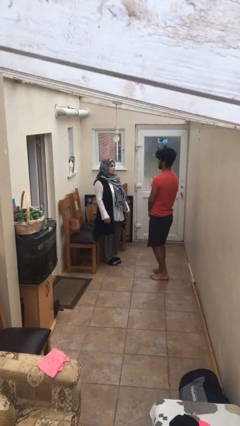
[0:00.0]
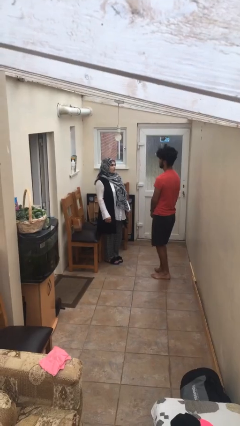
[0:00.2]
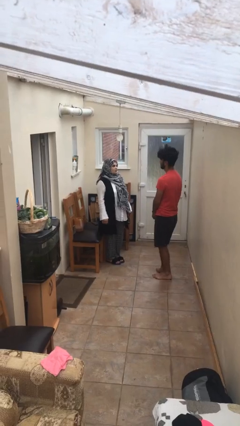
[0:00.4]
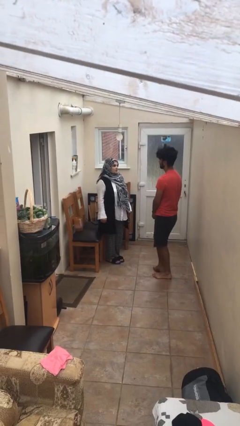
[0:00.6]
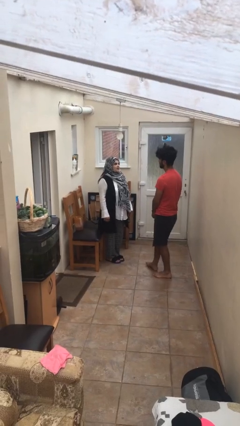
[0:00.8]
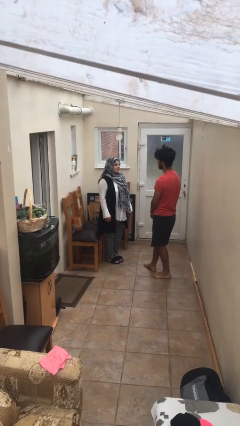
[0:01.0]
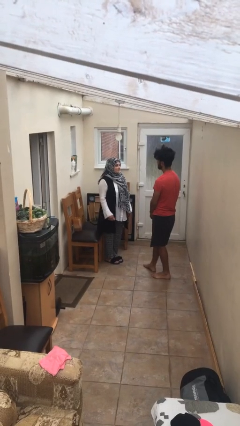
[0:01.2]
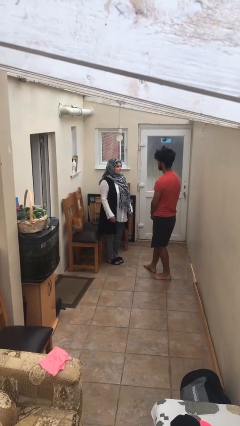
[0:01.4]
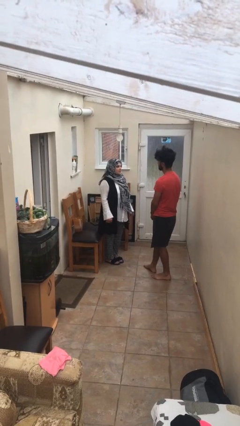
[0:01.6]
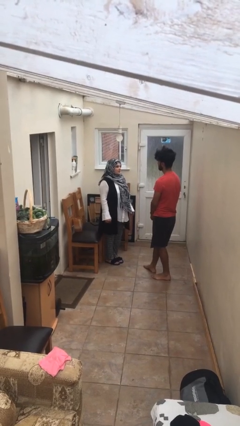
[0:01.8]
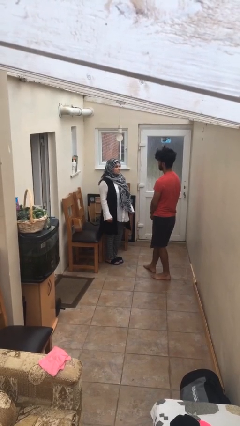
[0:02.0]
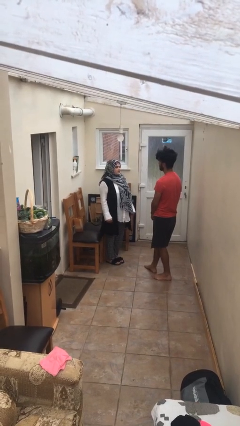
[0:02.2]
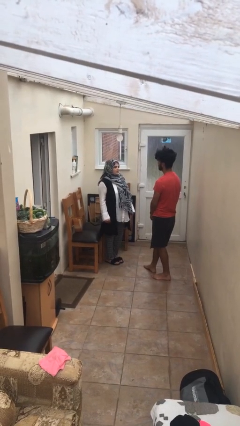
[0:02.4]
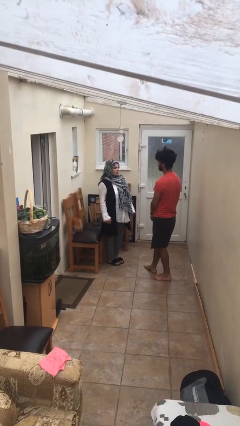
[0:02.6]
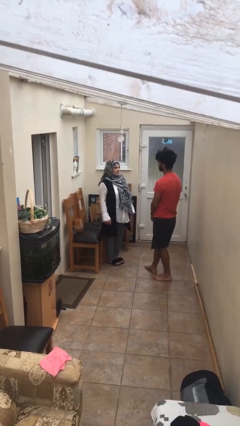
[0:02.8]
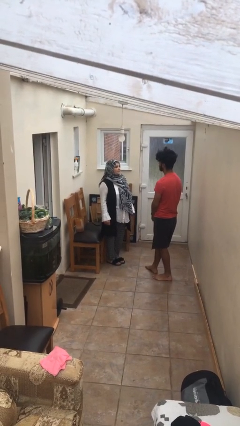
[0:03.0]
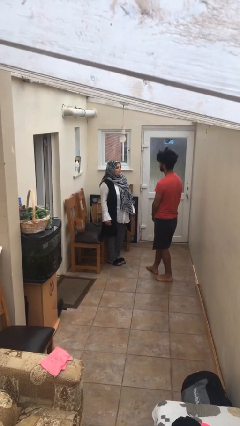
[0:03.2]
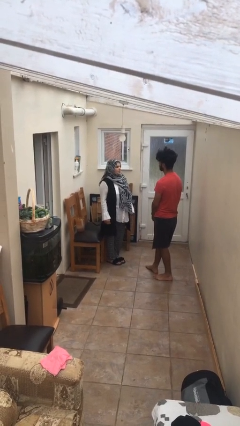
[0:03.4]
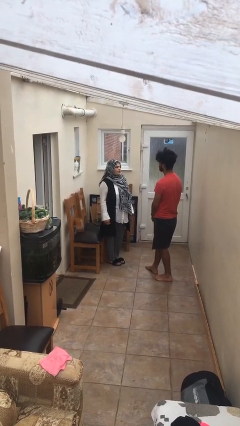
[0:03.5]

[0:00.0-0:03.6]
person talks to person

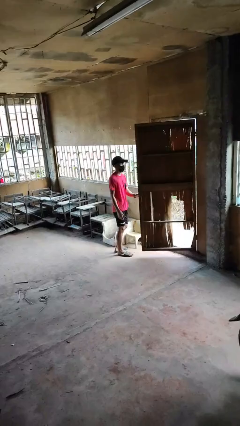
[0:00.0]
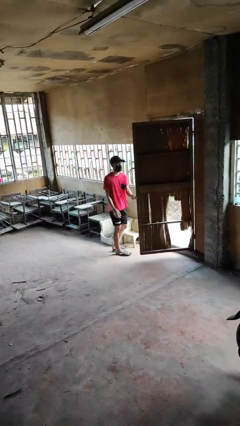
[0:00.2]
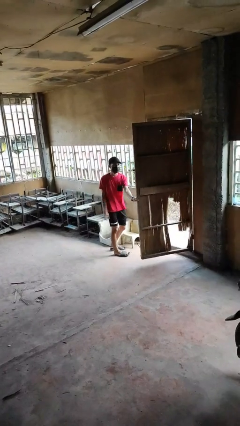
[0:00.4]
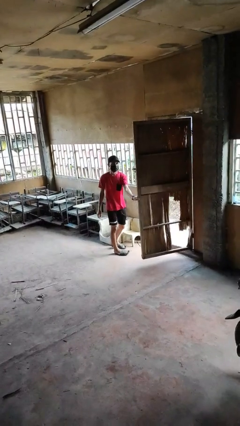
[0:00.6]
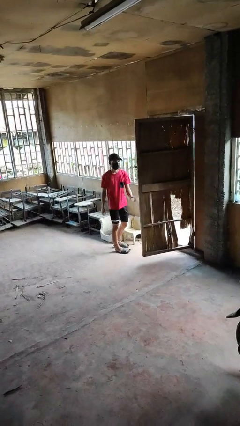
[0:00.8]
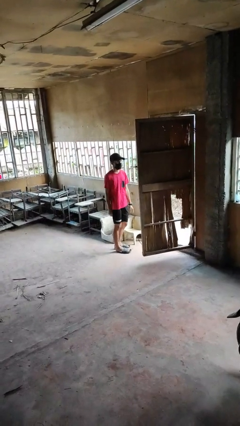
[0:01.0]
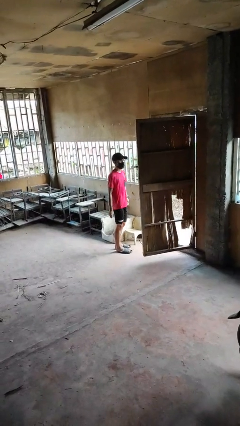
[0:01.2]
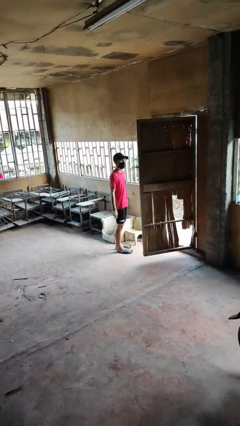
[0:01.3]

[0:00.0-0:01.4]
person opens facility door

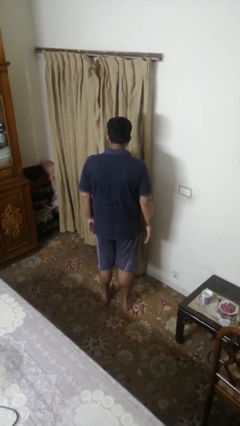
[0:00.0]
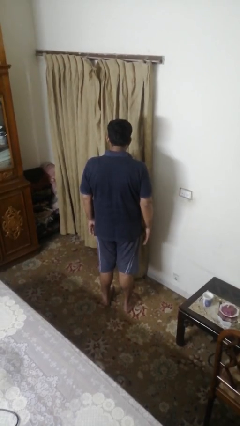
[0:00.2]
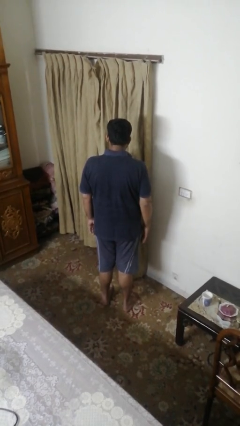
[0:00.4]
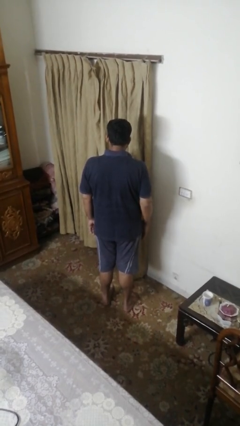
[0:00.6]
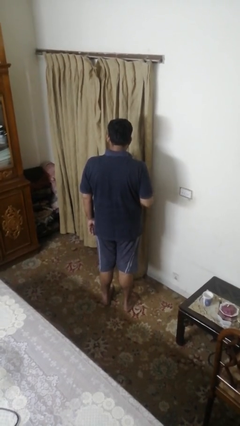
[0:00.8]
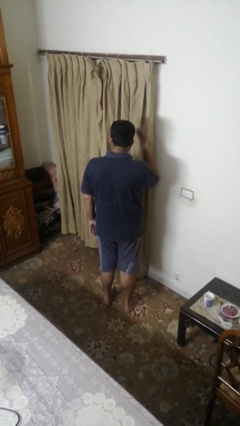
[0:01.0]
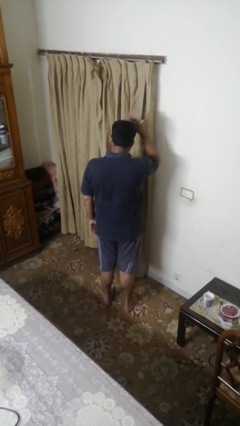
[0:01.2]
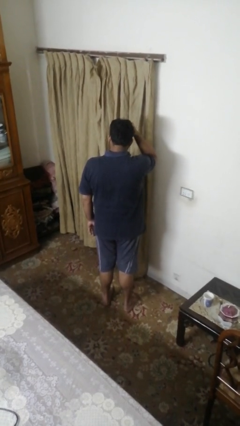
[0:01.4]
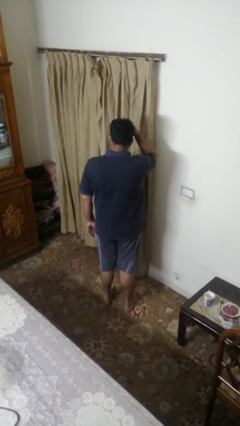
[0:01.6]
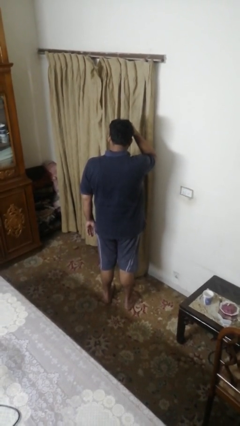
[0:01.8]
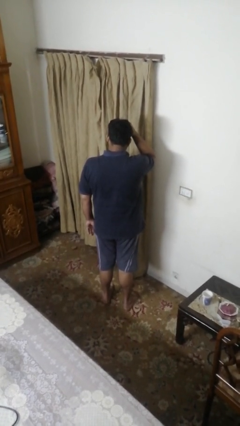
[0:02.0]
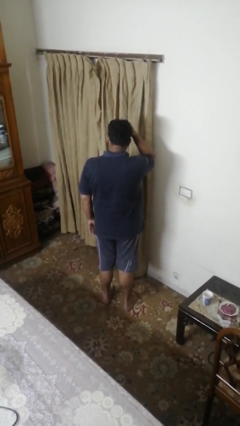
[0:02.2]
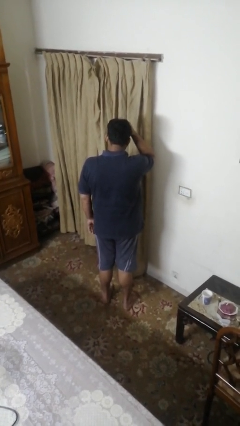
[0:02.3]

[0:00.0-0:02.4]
person pats head

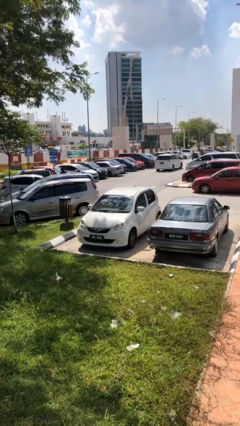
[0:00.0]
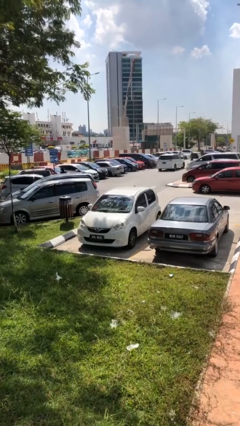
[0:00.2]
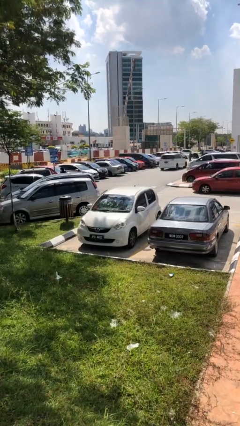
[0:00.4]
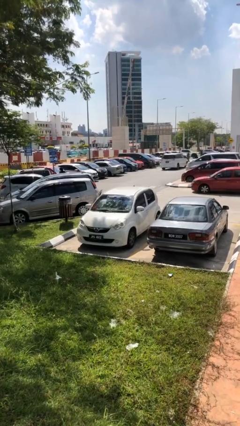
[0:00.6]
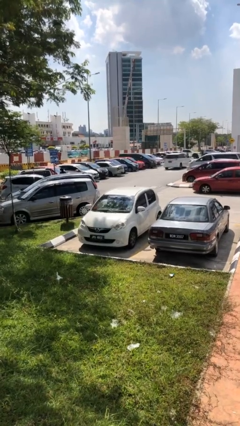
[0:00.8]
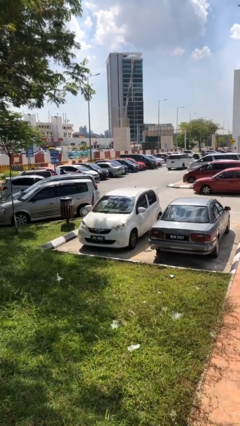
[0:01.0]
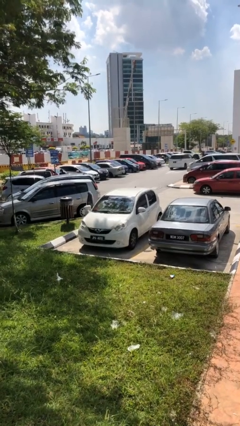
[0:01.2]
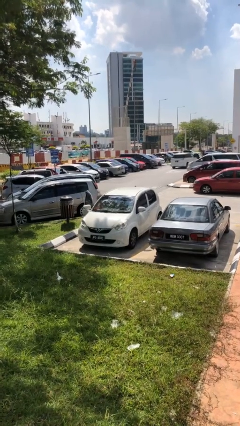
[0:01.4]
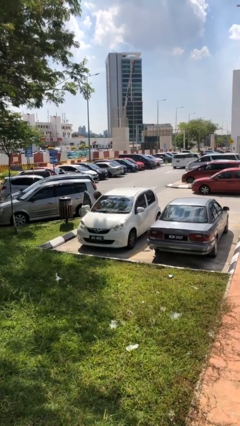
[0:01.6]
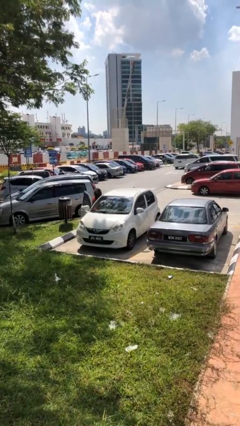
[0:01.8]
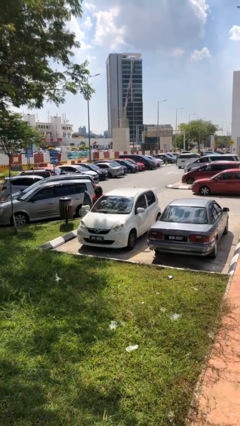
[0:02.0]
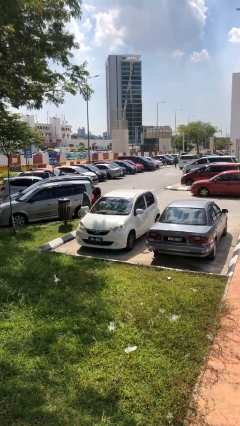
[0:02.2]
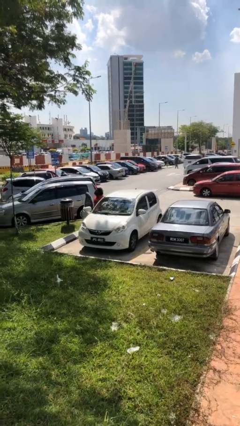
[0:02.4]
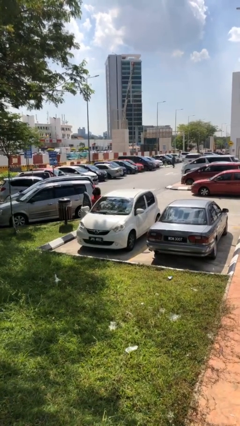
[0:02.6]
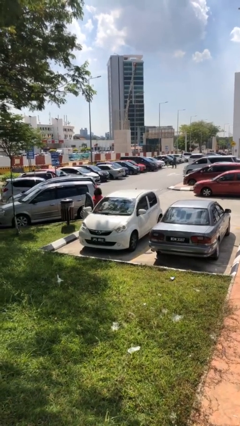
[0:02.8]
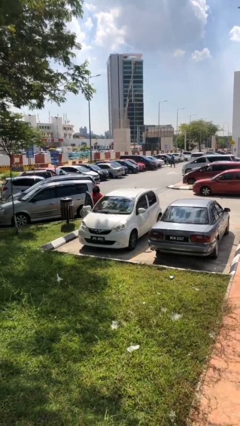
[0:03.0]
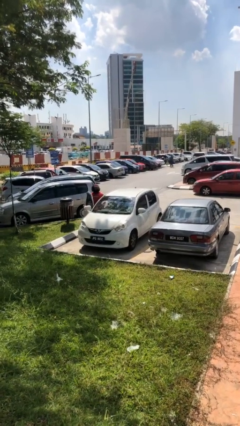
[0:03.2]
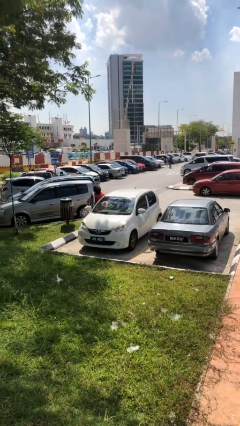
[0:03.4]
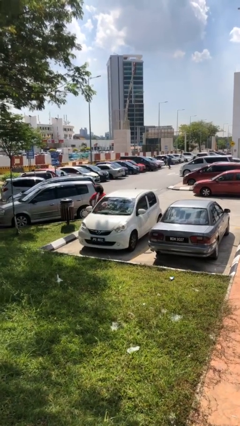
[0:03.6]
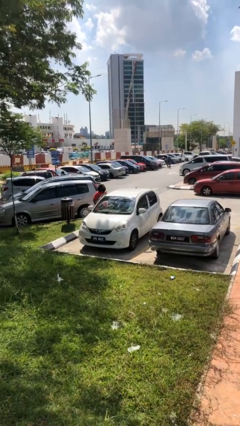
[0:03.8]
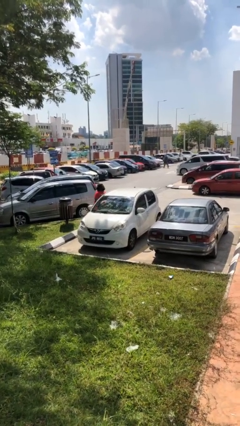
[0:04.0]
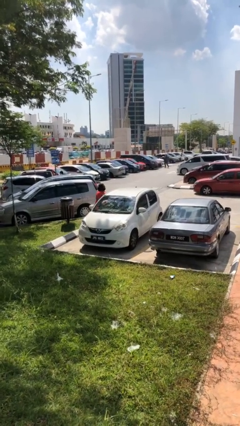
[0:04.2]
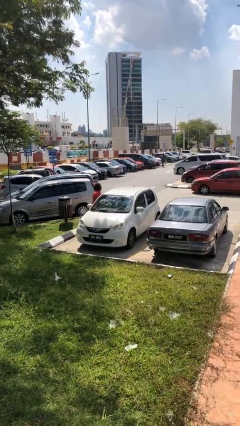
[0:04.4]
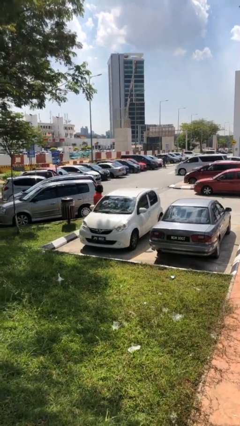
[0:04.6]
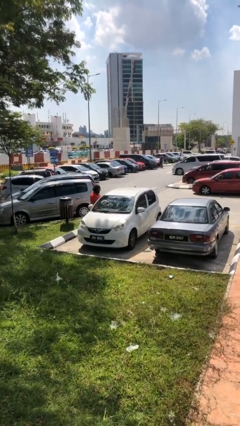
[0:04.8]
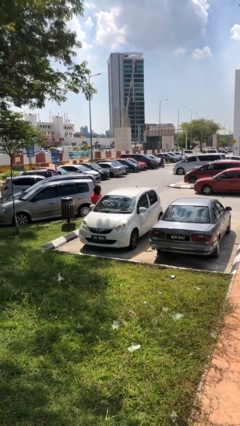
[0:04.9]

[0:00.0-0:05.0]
car drops off person

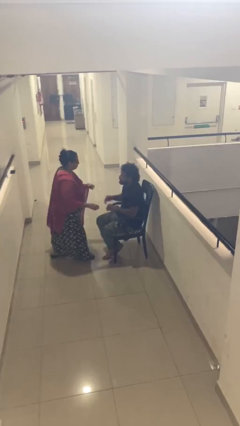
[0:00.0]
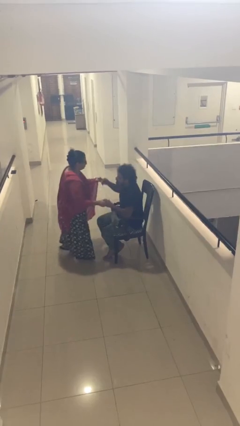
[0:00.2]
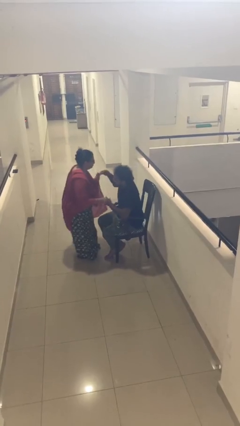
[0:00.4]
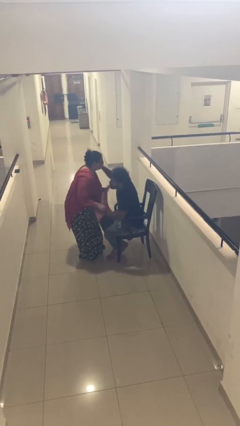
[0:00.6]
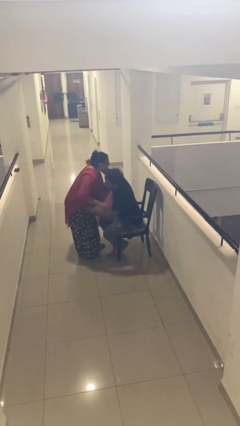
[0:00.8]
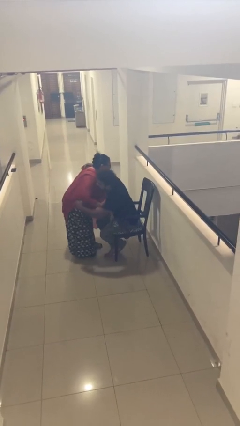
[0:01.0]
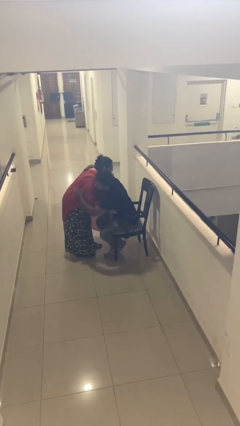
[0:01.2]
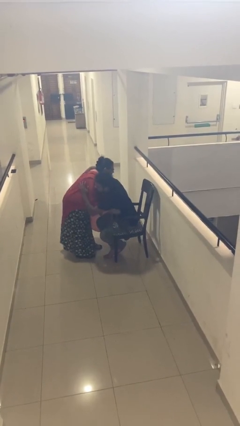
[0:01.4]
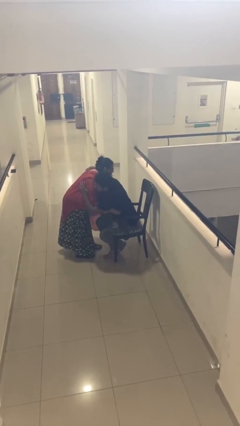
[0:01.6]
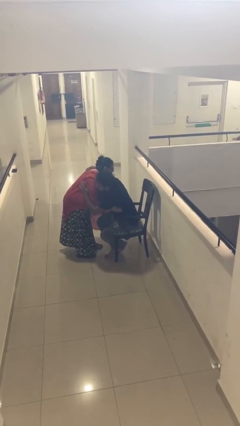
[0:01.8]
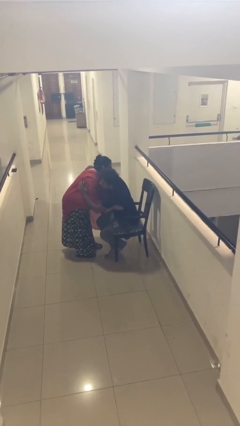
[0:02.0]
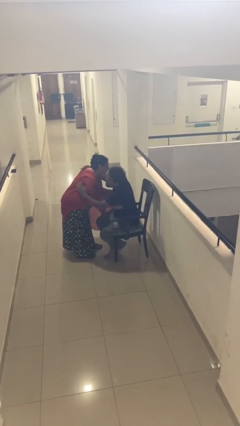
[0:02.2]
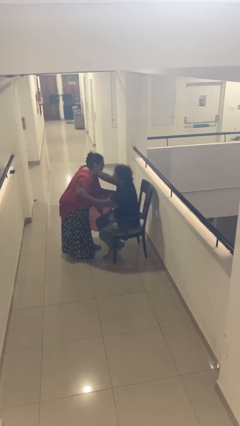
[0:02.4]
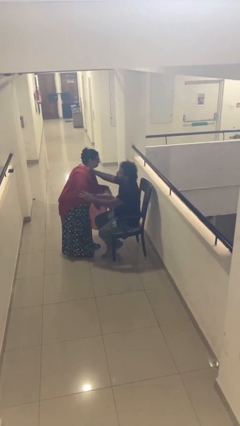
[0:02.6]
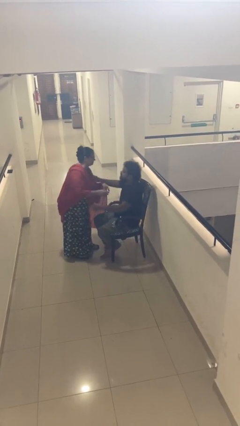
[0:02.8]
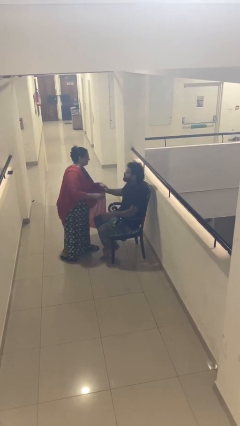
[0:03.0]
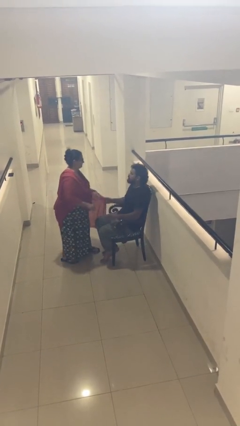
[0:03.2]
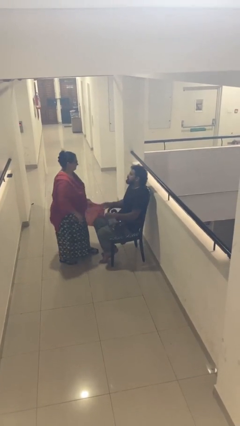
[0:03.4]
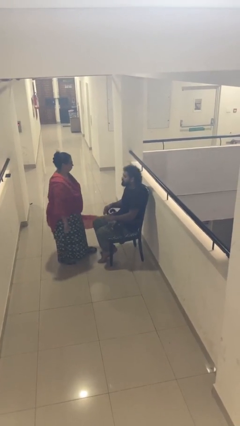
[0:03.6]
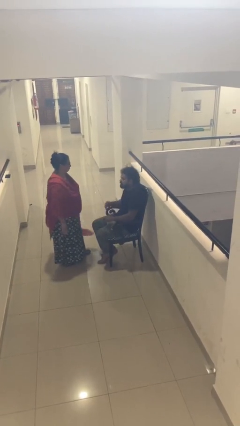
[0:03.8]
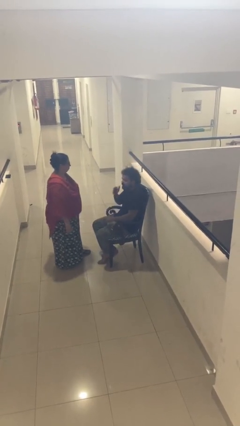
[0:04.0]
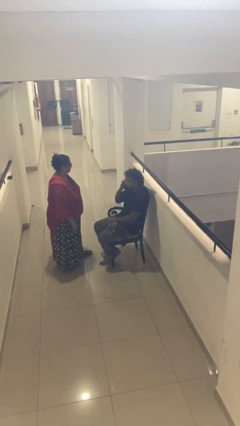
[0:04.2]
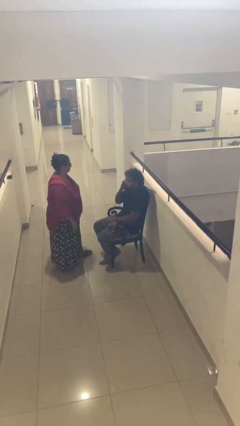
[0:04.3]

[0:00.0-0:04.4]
person embraces person

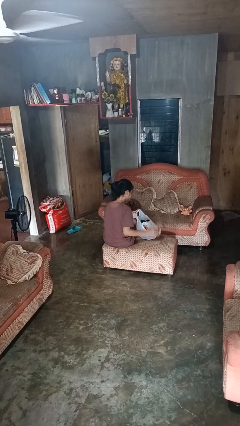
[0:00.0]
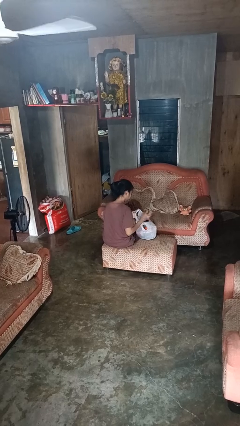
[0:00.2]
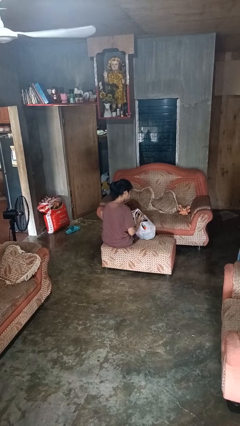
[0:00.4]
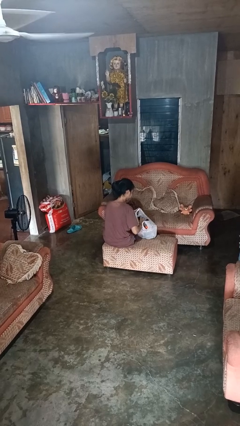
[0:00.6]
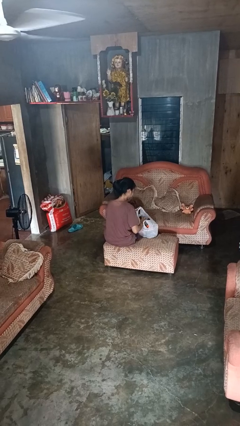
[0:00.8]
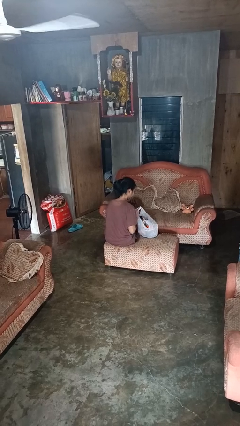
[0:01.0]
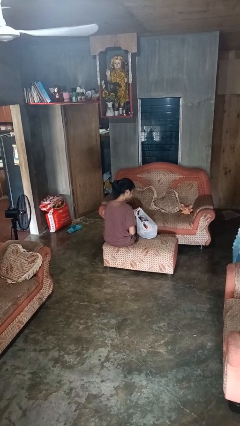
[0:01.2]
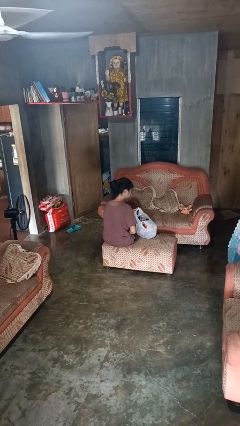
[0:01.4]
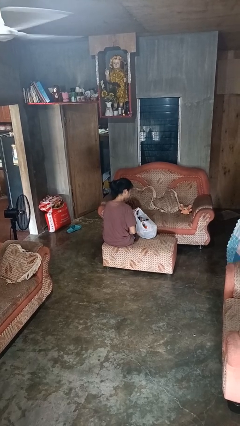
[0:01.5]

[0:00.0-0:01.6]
person puts object into bag
